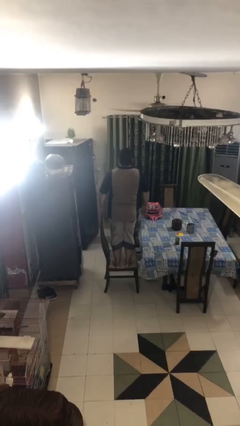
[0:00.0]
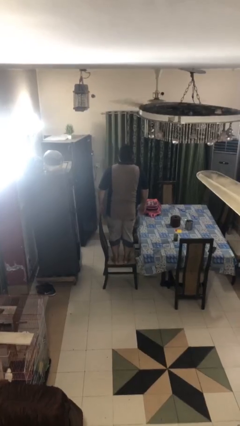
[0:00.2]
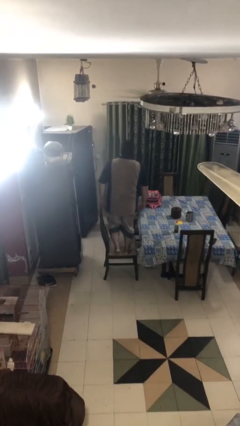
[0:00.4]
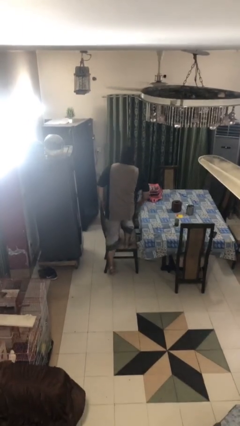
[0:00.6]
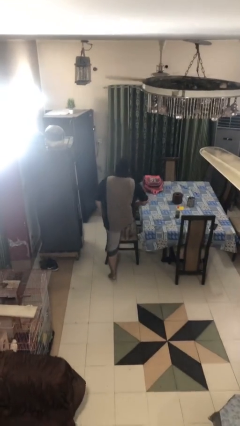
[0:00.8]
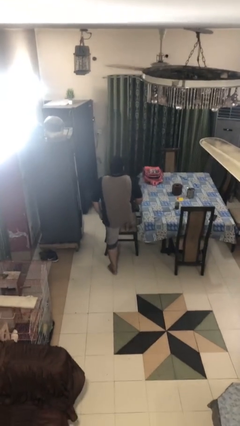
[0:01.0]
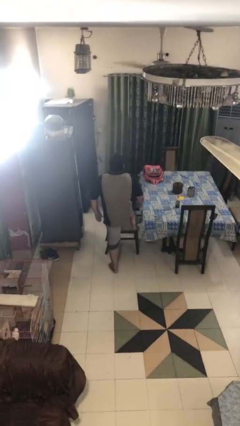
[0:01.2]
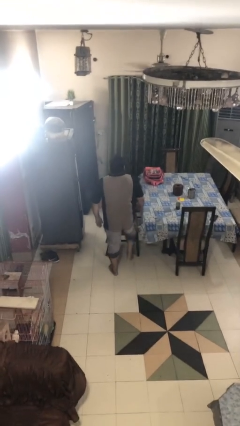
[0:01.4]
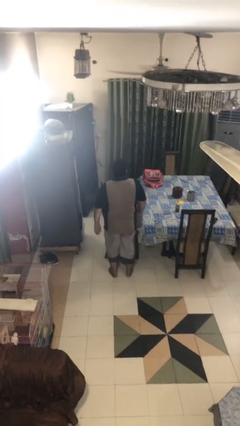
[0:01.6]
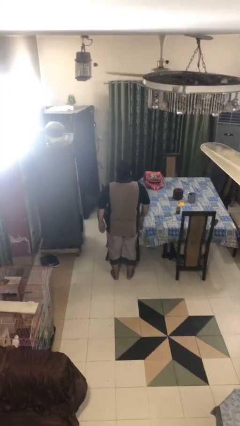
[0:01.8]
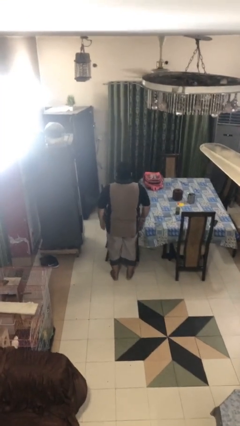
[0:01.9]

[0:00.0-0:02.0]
person climbs off chair

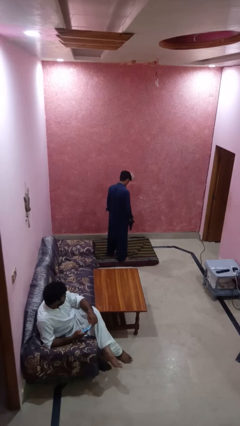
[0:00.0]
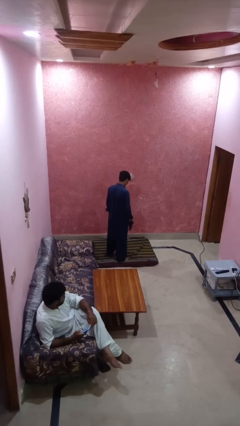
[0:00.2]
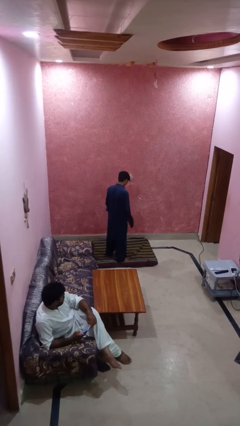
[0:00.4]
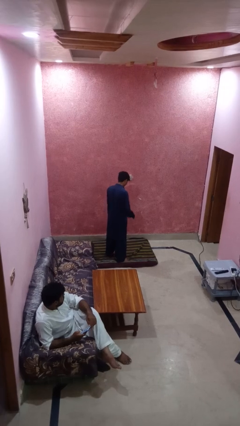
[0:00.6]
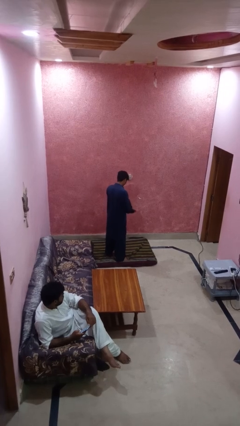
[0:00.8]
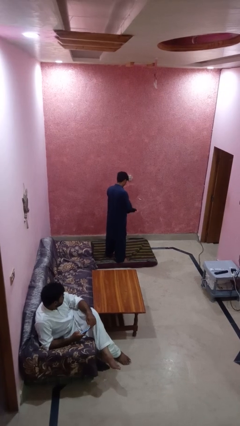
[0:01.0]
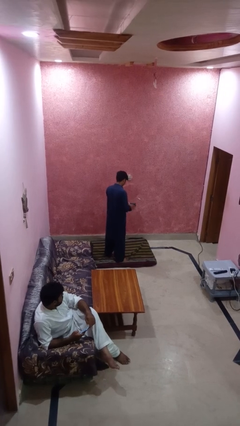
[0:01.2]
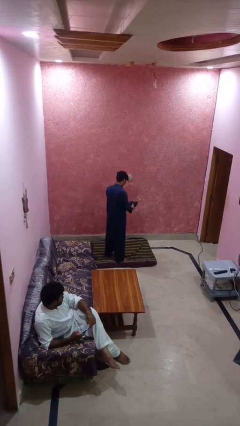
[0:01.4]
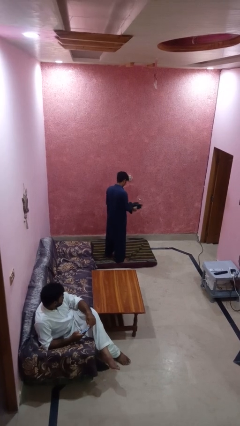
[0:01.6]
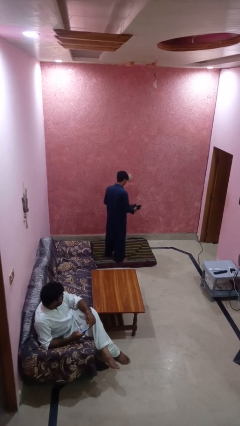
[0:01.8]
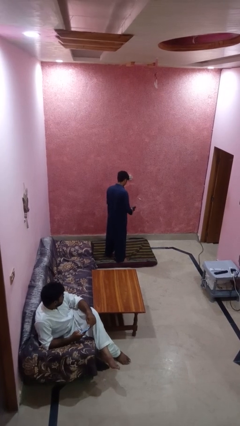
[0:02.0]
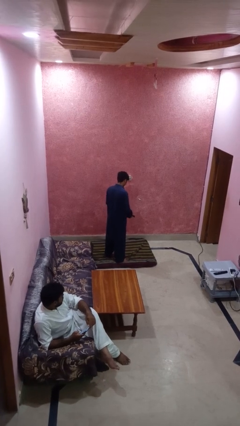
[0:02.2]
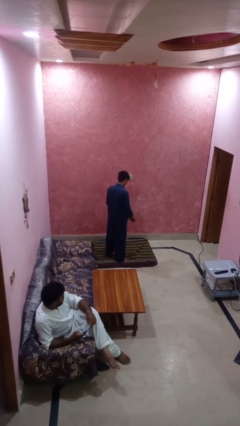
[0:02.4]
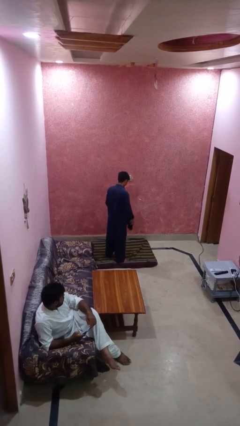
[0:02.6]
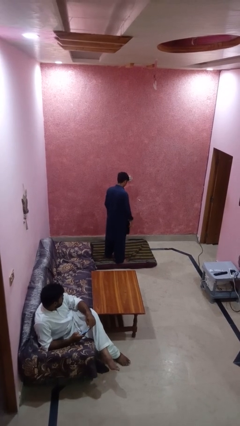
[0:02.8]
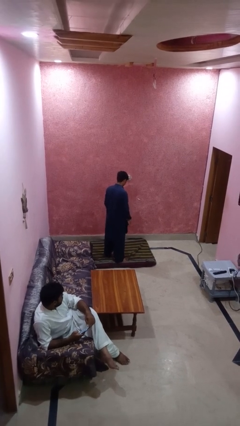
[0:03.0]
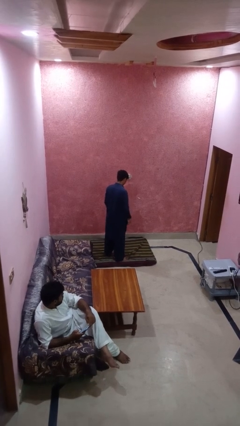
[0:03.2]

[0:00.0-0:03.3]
person takes off gloves

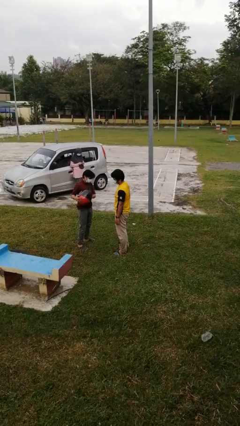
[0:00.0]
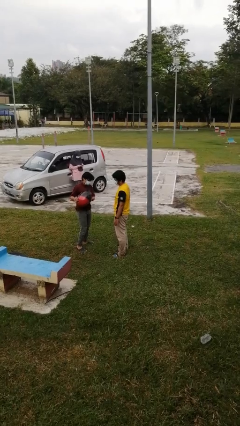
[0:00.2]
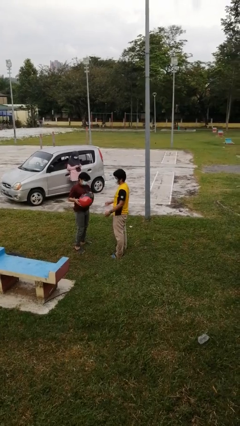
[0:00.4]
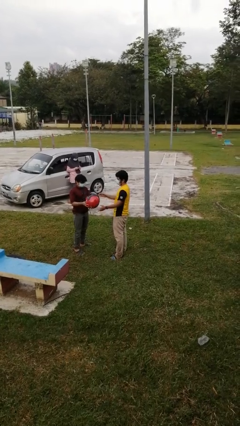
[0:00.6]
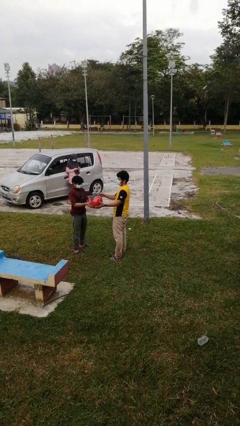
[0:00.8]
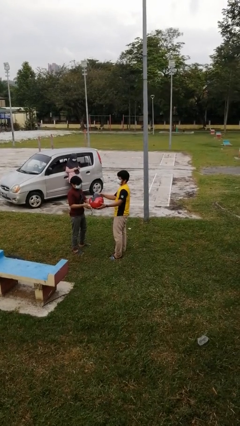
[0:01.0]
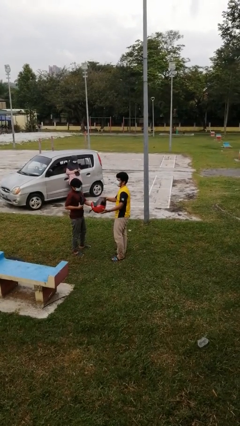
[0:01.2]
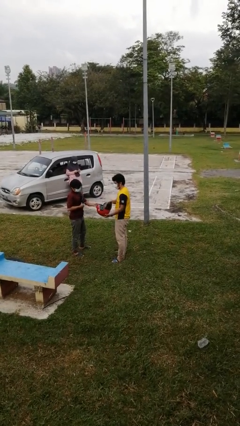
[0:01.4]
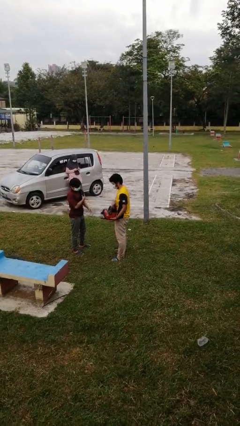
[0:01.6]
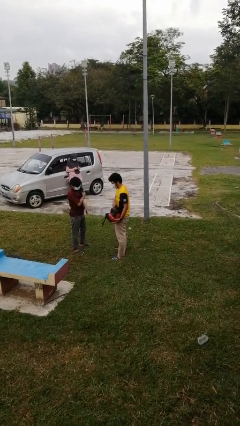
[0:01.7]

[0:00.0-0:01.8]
person transfers object to person

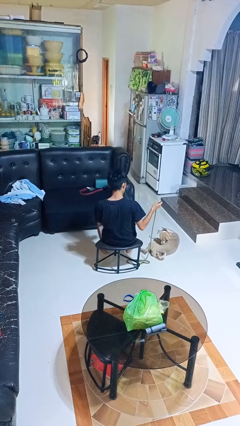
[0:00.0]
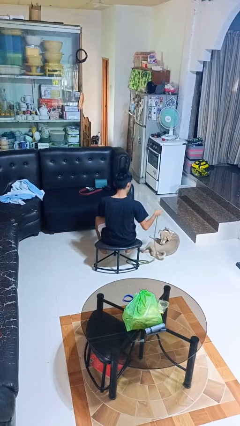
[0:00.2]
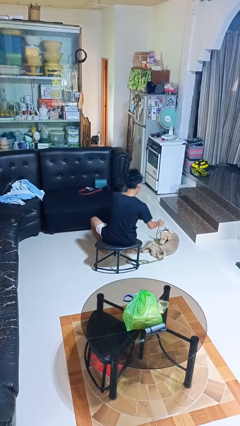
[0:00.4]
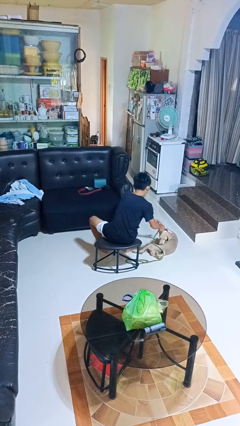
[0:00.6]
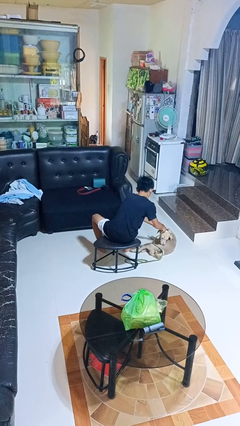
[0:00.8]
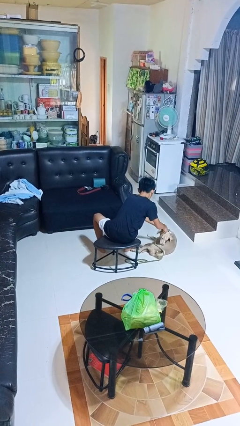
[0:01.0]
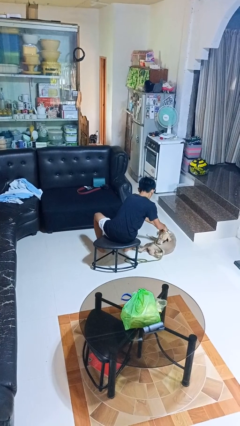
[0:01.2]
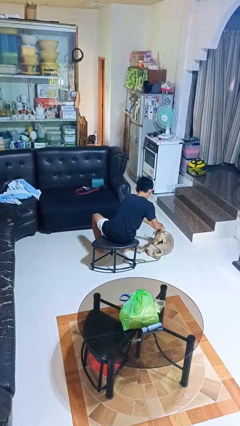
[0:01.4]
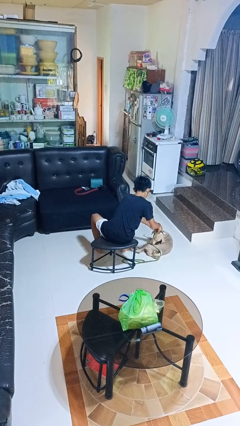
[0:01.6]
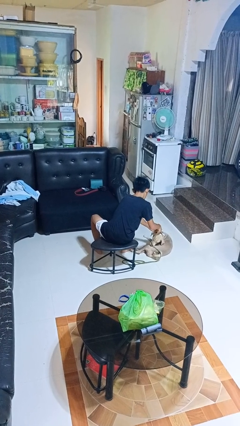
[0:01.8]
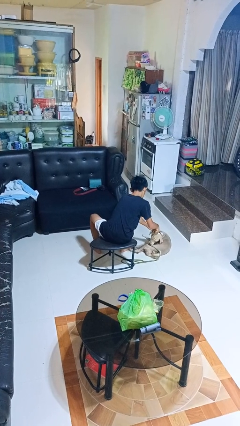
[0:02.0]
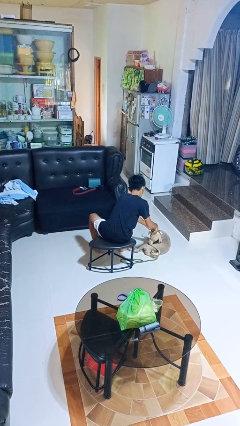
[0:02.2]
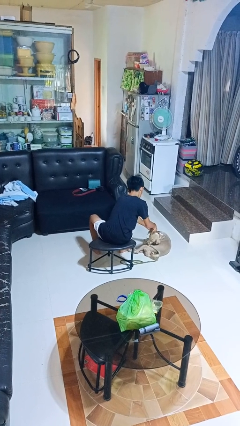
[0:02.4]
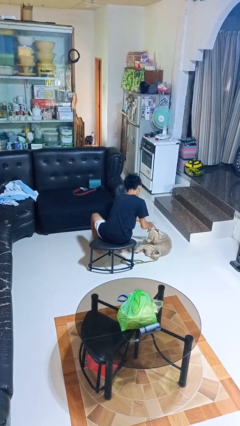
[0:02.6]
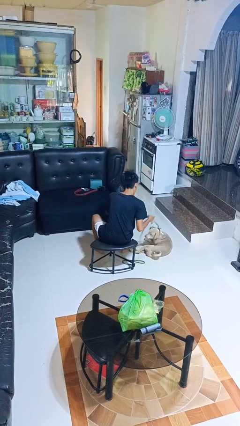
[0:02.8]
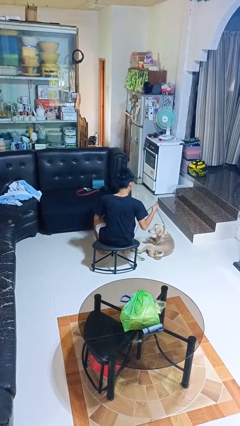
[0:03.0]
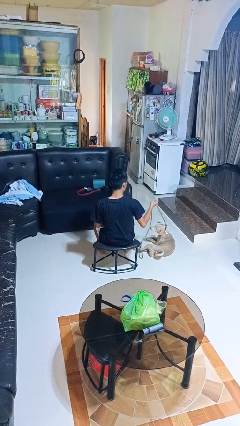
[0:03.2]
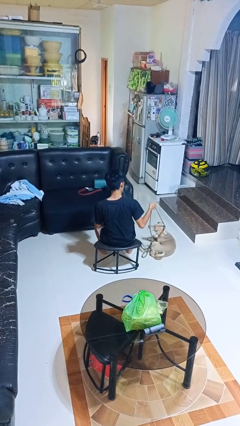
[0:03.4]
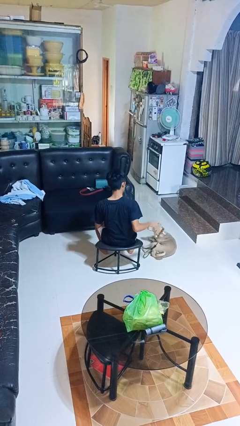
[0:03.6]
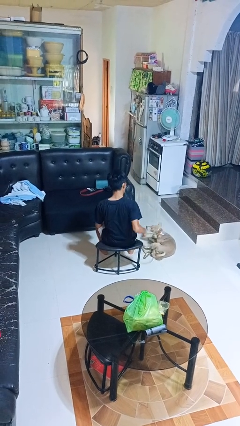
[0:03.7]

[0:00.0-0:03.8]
person attaches leash to dog

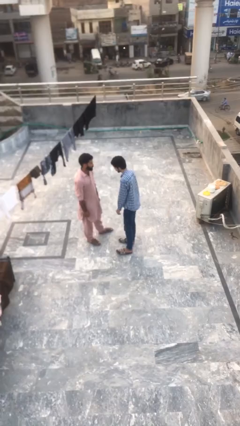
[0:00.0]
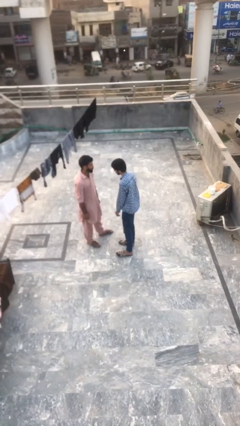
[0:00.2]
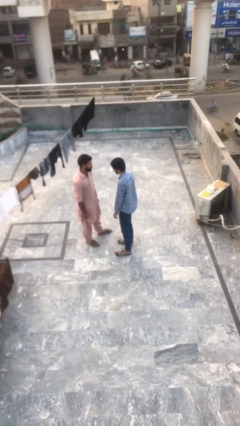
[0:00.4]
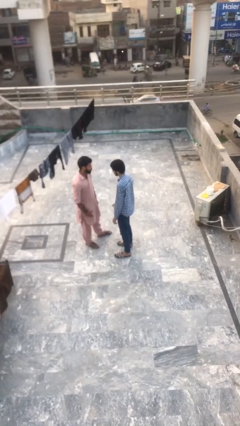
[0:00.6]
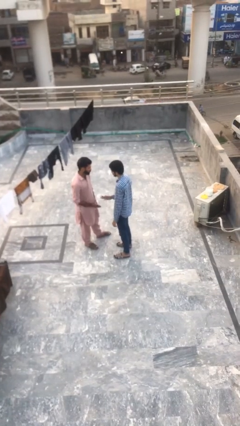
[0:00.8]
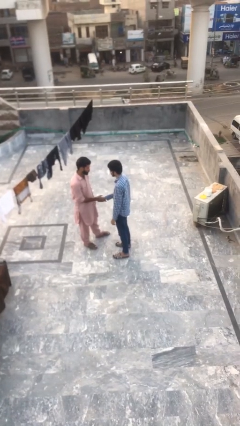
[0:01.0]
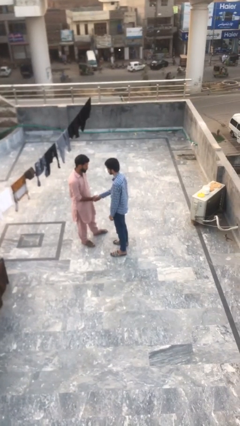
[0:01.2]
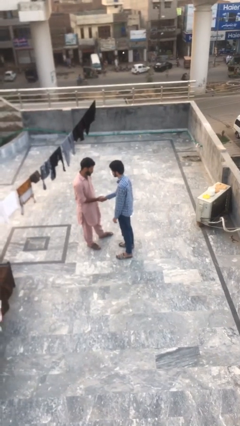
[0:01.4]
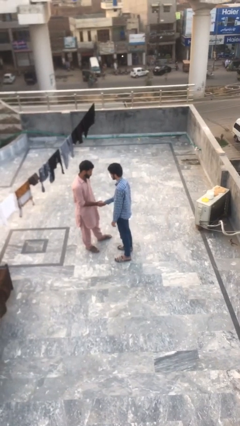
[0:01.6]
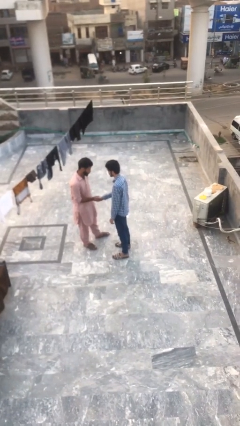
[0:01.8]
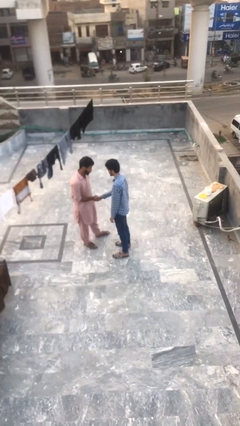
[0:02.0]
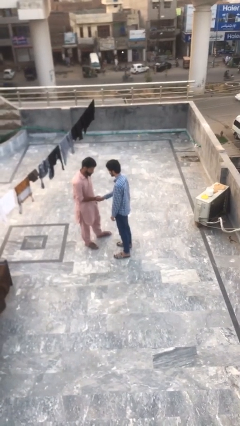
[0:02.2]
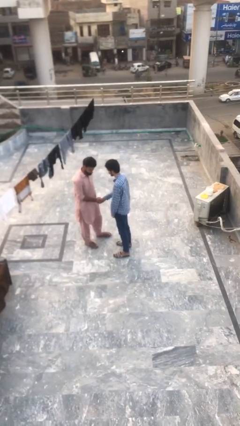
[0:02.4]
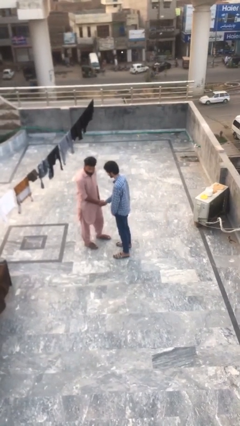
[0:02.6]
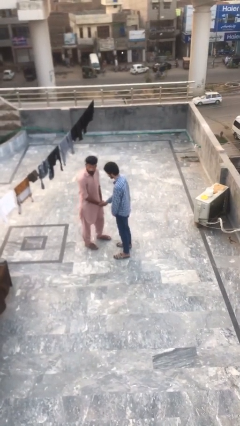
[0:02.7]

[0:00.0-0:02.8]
person shakes hand

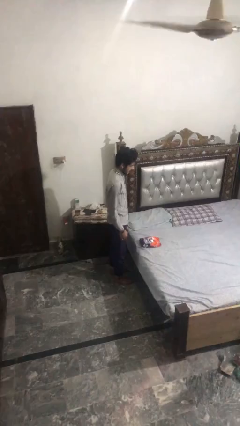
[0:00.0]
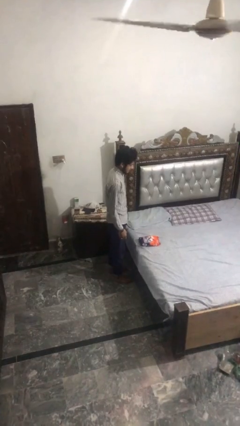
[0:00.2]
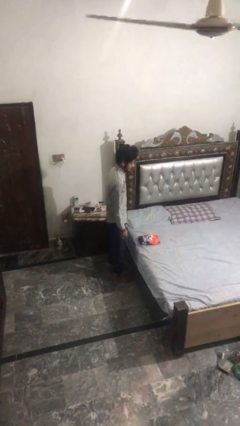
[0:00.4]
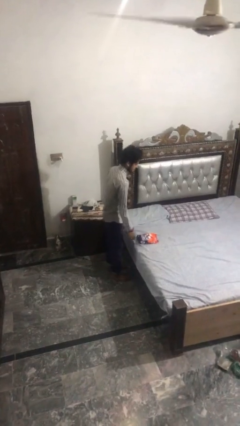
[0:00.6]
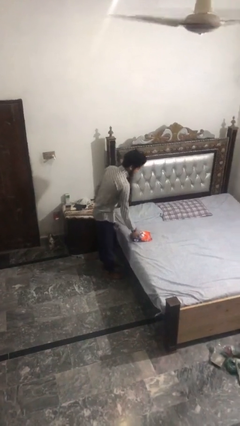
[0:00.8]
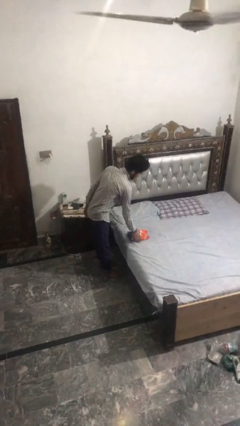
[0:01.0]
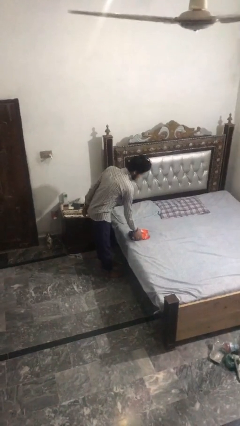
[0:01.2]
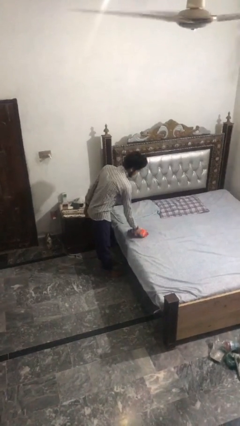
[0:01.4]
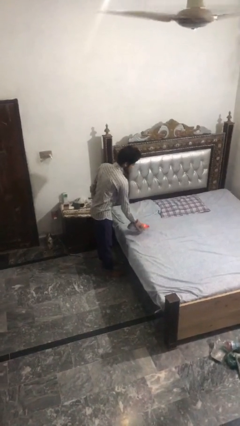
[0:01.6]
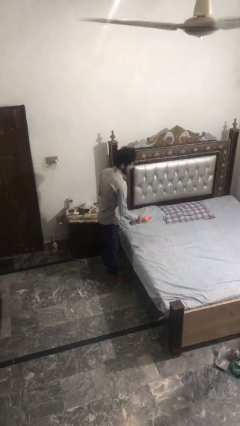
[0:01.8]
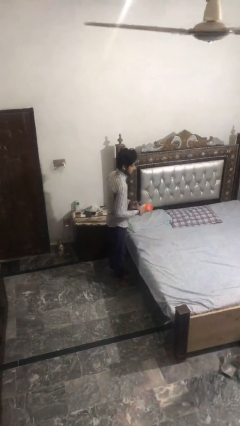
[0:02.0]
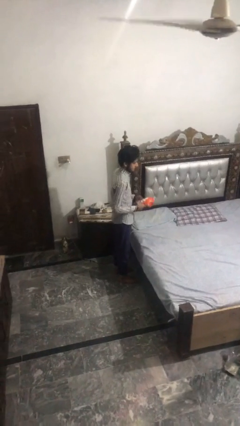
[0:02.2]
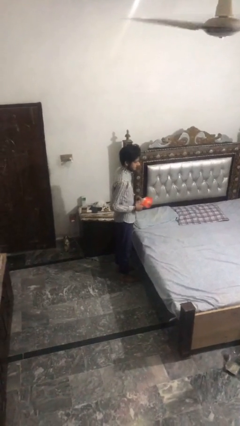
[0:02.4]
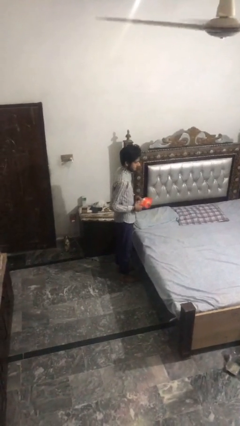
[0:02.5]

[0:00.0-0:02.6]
person picks up object from bed

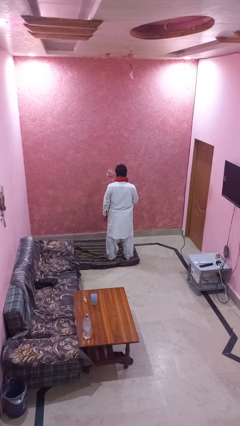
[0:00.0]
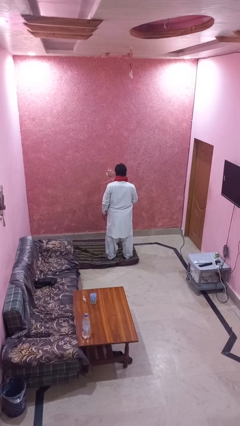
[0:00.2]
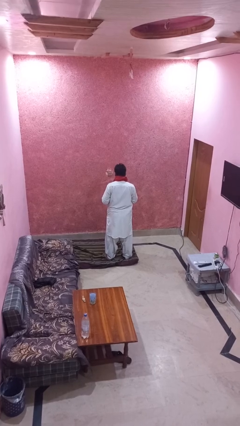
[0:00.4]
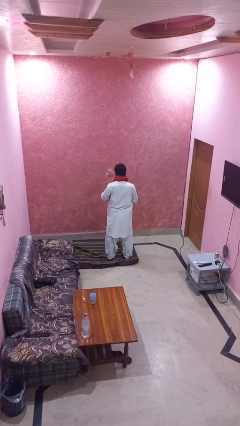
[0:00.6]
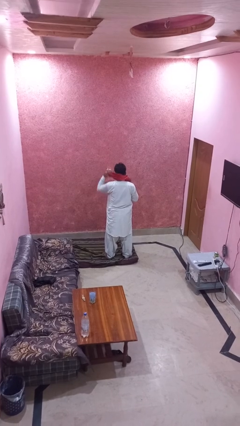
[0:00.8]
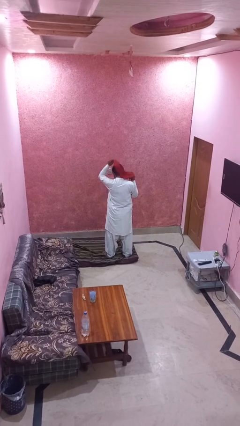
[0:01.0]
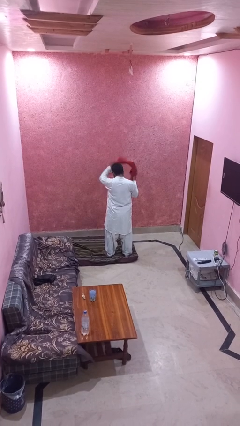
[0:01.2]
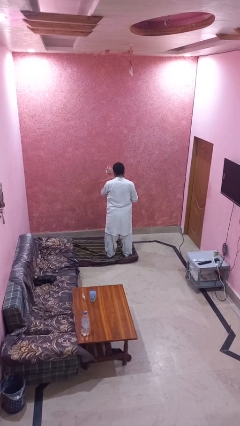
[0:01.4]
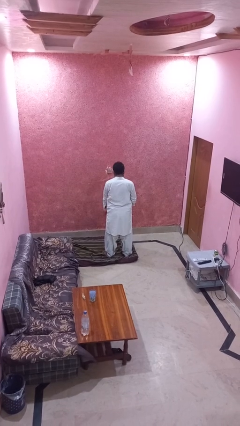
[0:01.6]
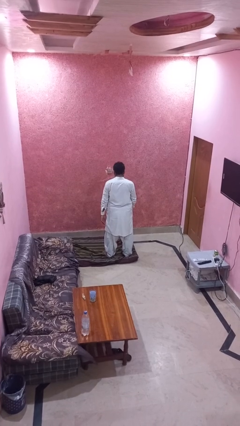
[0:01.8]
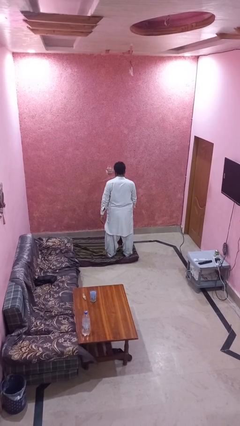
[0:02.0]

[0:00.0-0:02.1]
person takes off scarf
